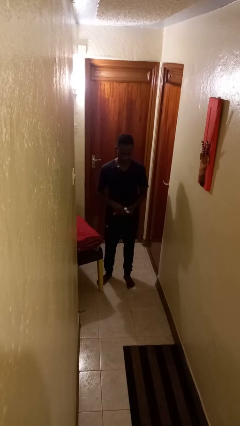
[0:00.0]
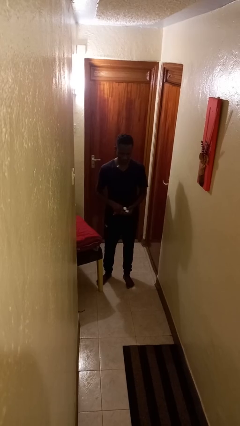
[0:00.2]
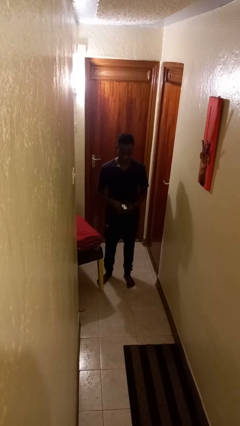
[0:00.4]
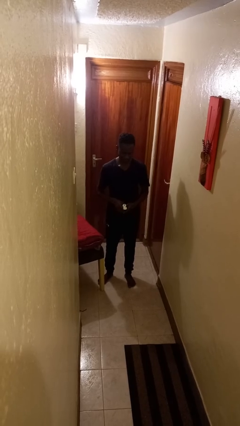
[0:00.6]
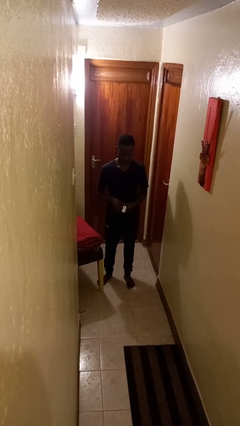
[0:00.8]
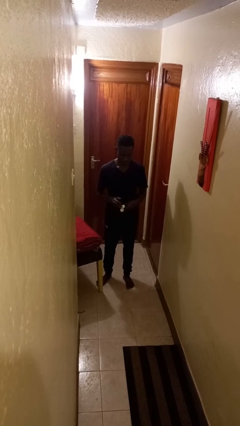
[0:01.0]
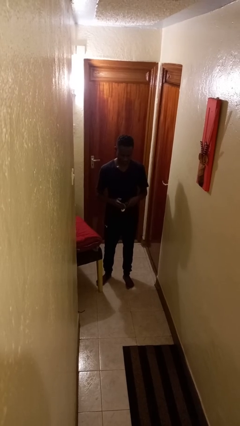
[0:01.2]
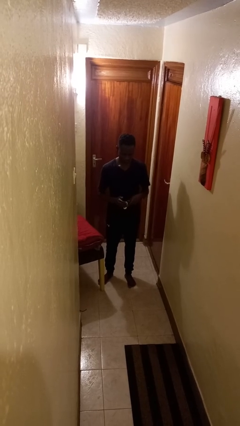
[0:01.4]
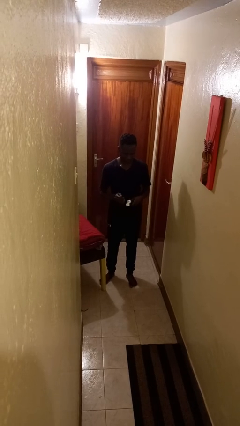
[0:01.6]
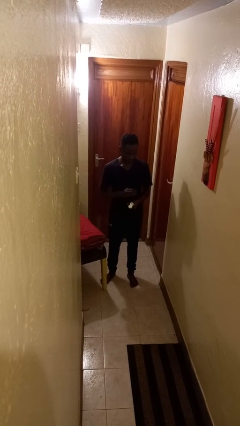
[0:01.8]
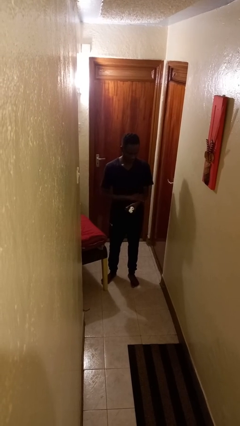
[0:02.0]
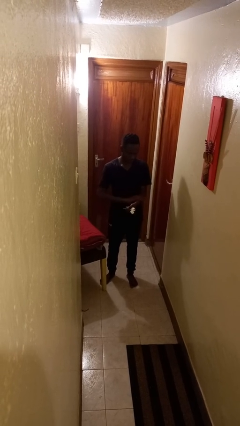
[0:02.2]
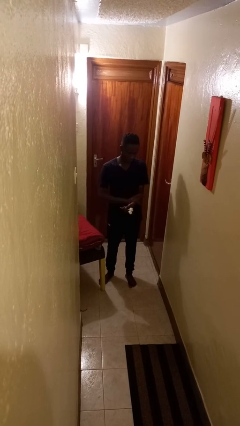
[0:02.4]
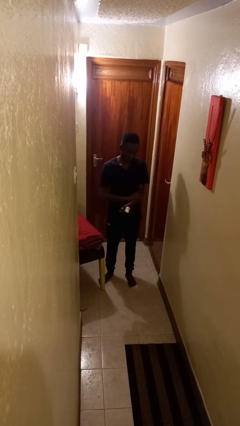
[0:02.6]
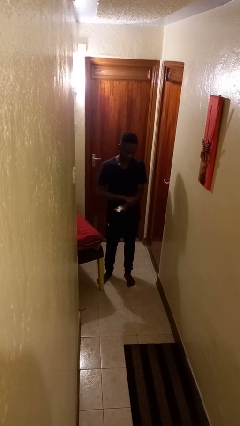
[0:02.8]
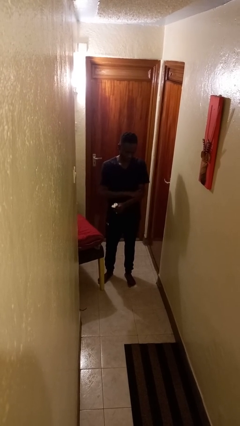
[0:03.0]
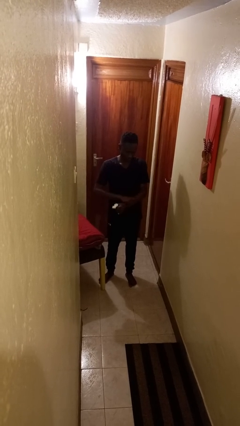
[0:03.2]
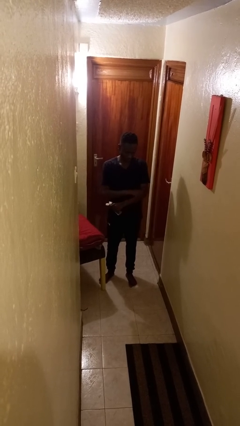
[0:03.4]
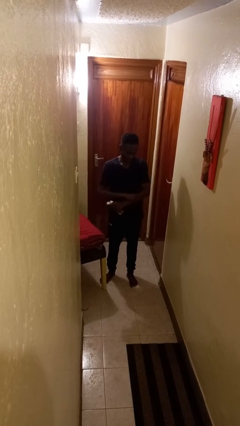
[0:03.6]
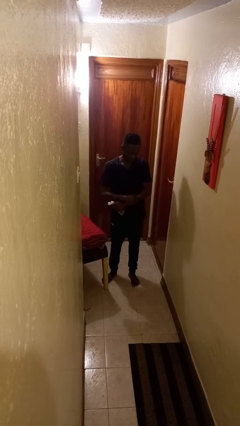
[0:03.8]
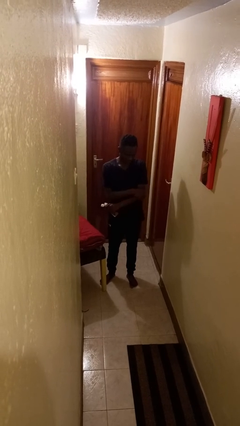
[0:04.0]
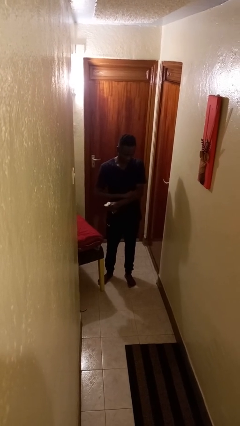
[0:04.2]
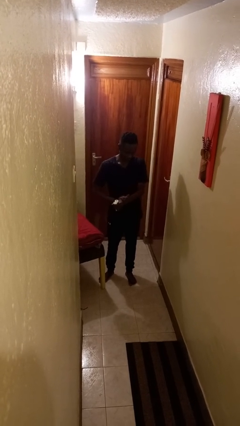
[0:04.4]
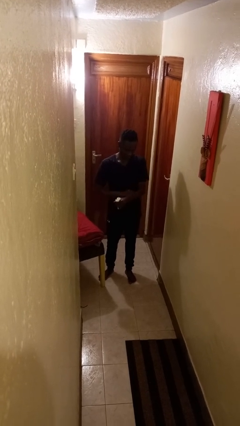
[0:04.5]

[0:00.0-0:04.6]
person applies sunscreen

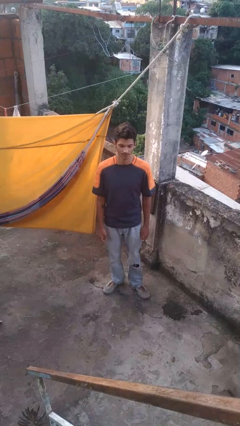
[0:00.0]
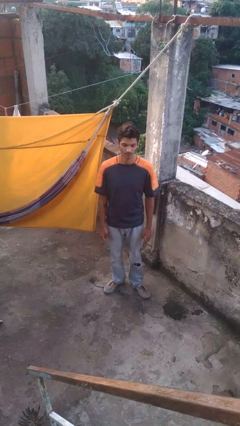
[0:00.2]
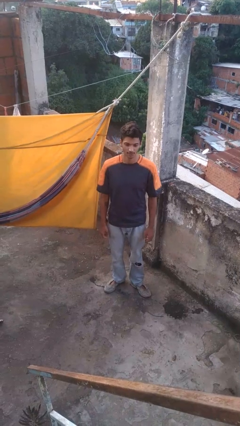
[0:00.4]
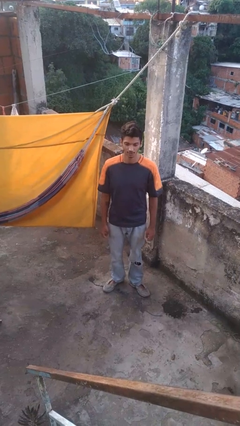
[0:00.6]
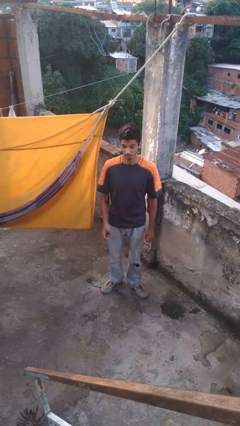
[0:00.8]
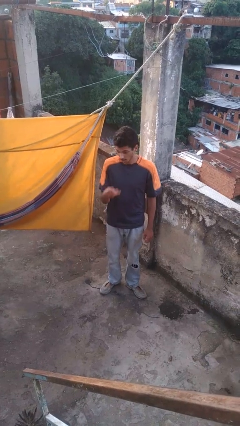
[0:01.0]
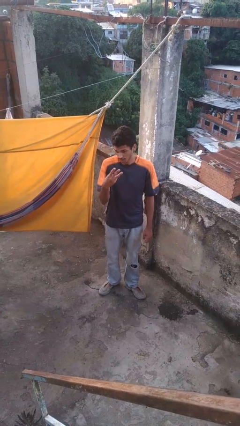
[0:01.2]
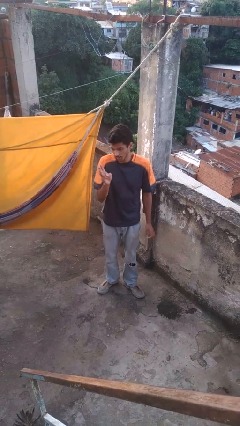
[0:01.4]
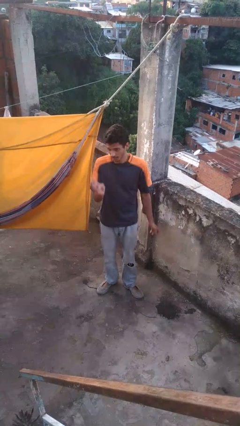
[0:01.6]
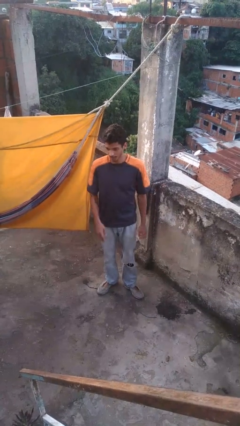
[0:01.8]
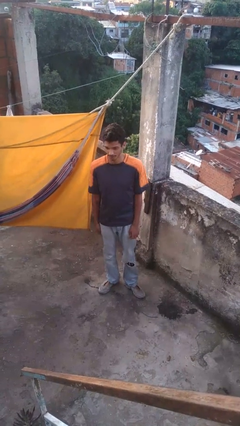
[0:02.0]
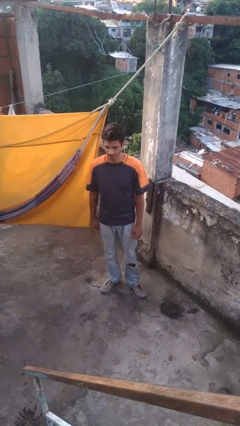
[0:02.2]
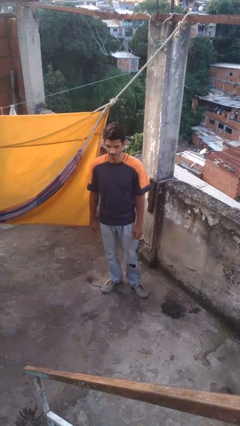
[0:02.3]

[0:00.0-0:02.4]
person gestures number three

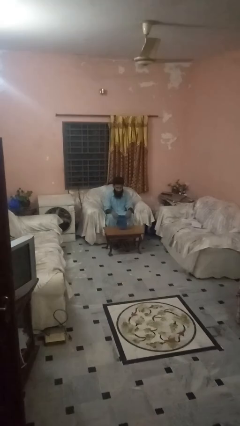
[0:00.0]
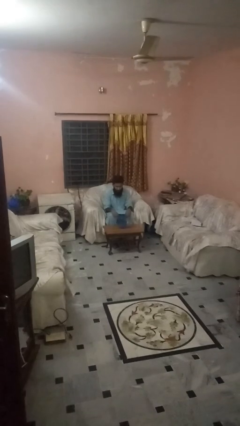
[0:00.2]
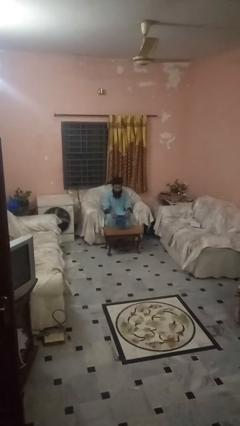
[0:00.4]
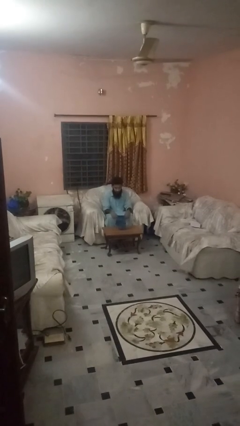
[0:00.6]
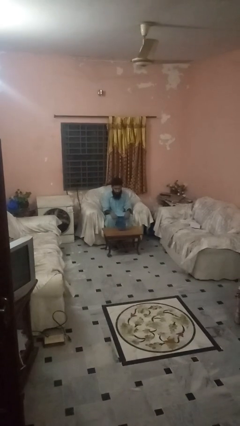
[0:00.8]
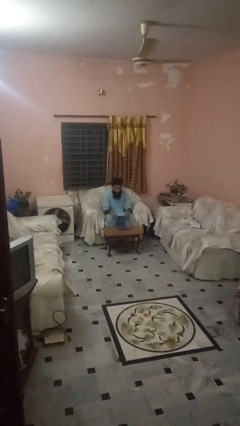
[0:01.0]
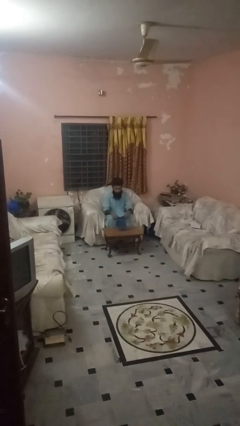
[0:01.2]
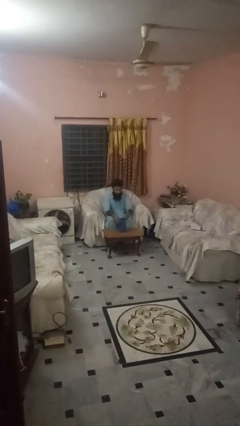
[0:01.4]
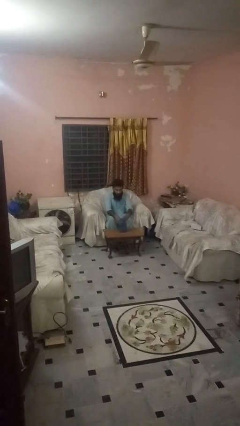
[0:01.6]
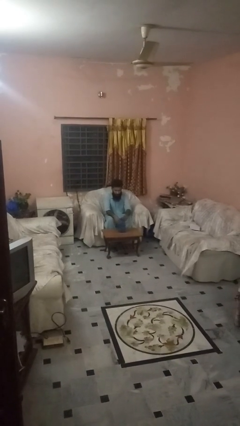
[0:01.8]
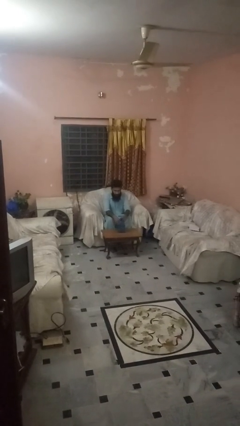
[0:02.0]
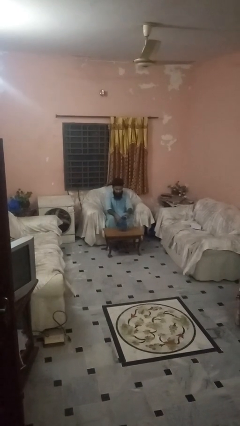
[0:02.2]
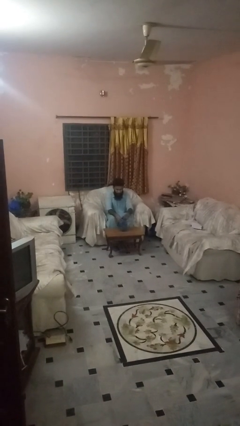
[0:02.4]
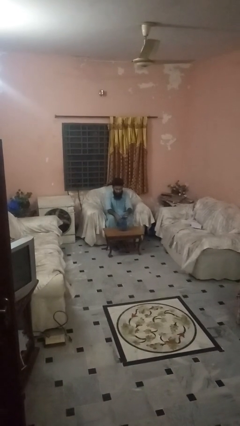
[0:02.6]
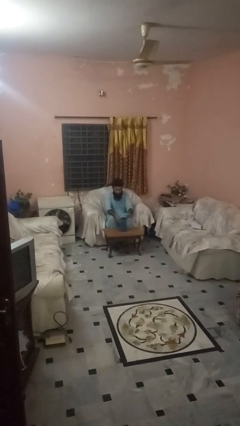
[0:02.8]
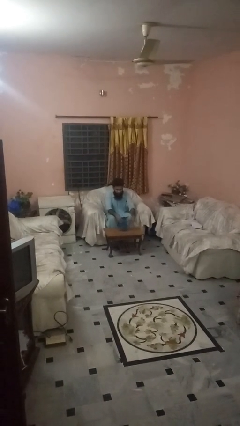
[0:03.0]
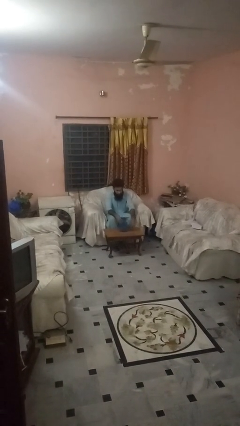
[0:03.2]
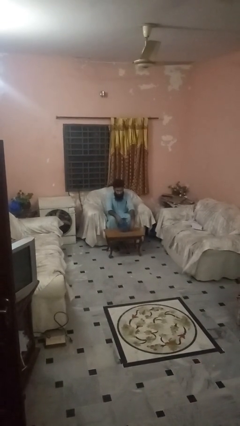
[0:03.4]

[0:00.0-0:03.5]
person unscrews lid from bottle

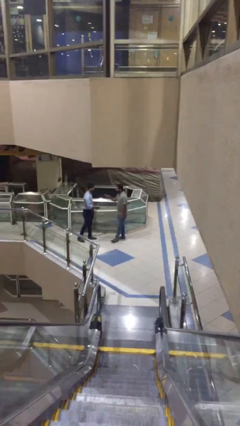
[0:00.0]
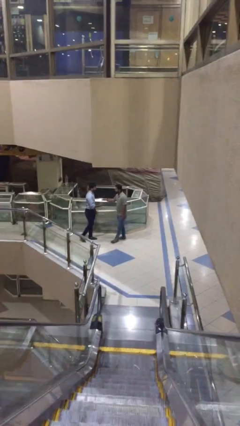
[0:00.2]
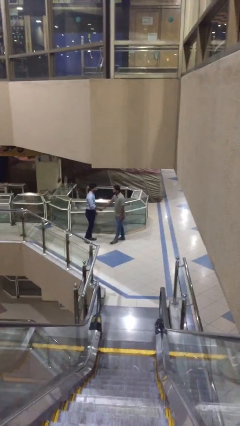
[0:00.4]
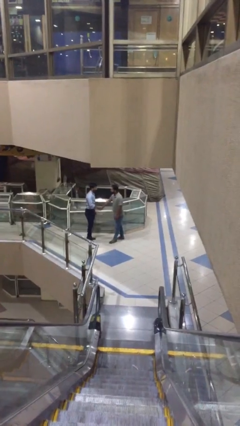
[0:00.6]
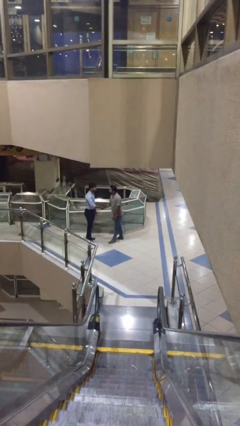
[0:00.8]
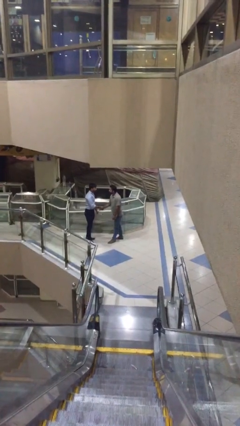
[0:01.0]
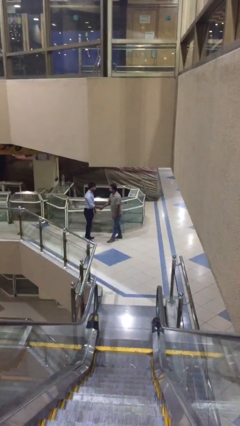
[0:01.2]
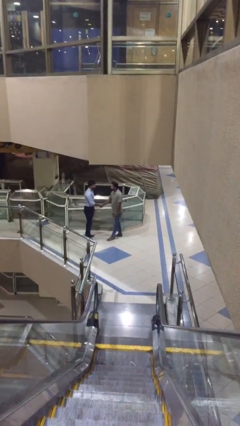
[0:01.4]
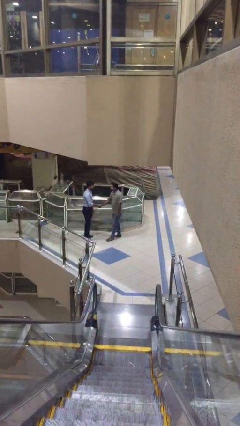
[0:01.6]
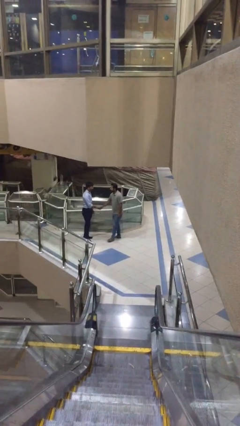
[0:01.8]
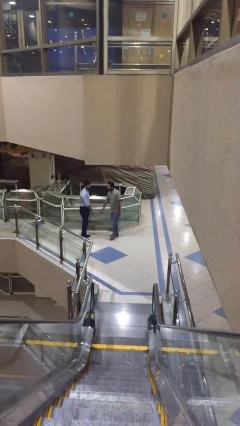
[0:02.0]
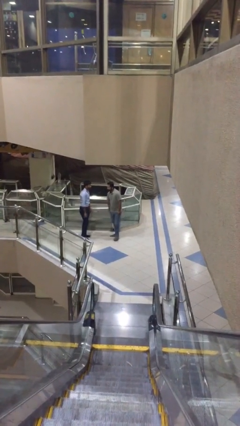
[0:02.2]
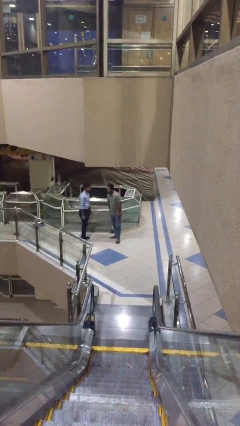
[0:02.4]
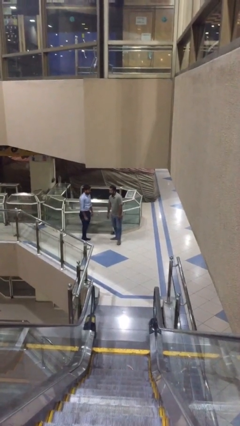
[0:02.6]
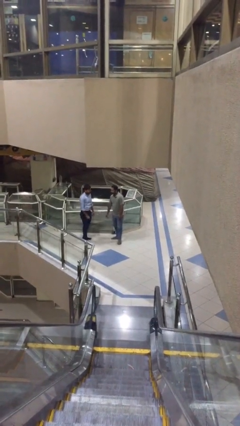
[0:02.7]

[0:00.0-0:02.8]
person shakes hand

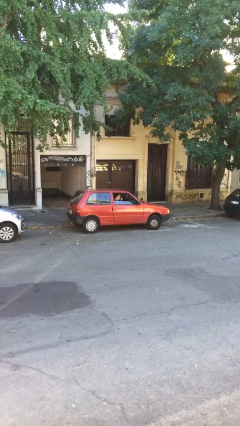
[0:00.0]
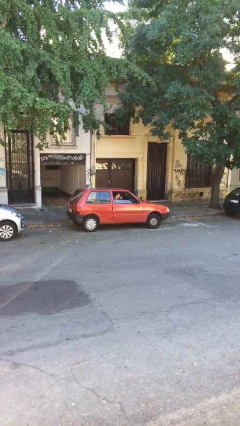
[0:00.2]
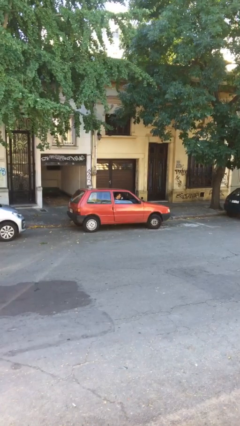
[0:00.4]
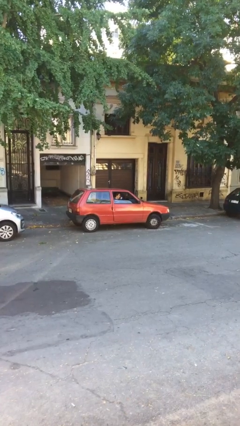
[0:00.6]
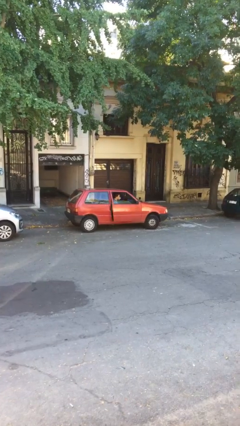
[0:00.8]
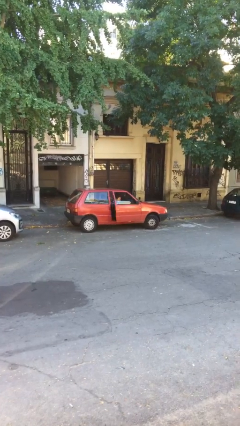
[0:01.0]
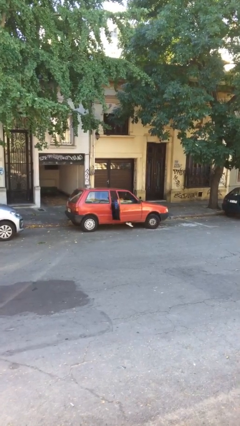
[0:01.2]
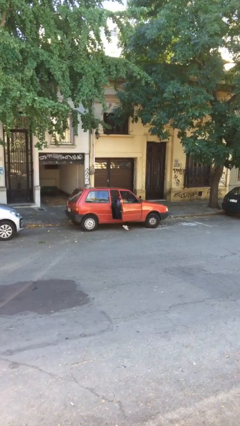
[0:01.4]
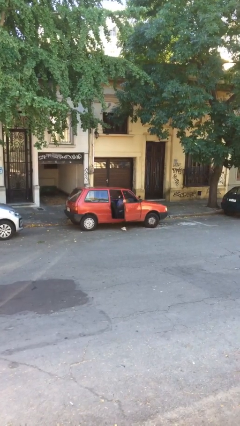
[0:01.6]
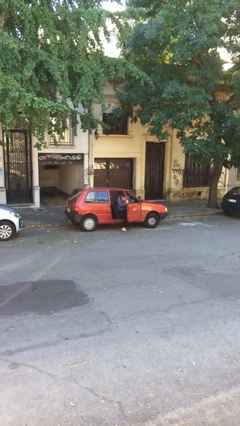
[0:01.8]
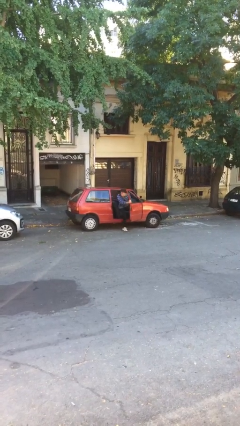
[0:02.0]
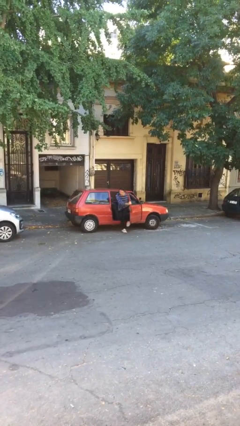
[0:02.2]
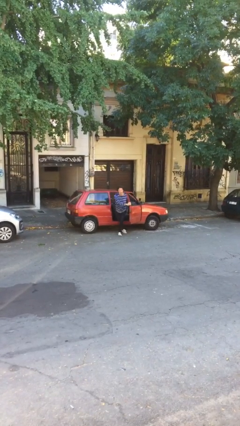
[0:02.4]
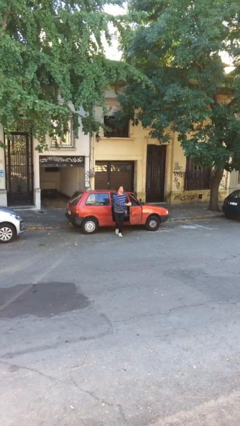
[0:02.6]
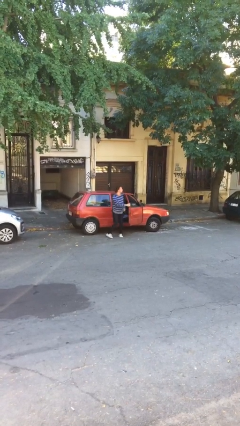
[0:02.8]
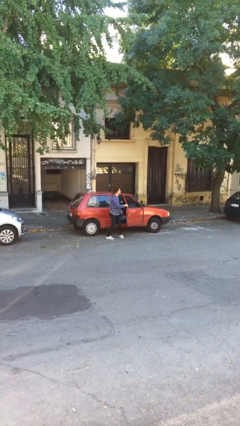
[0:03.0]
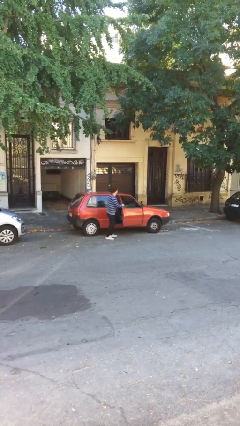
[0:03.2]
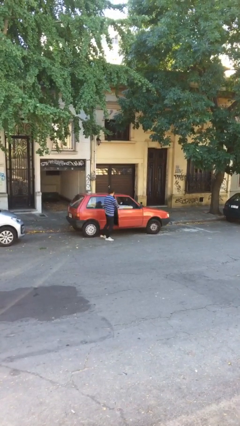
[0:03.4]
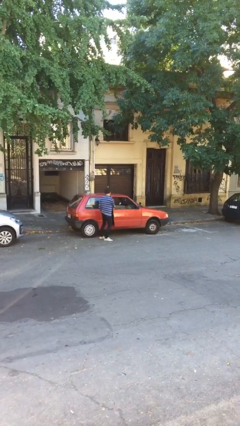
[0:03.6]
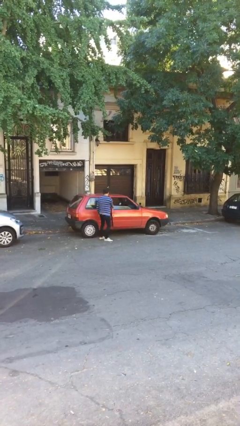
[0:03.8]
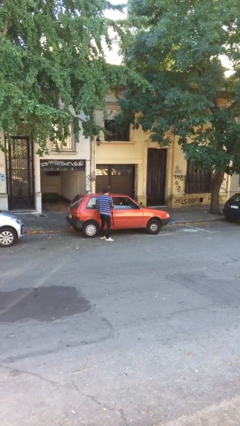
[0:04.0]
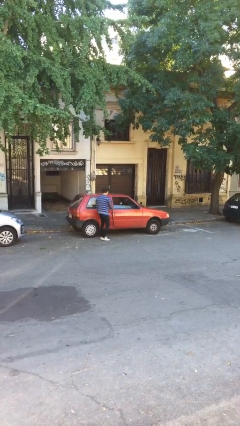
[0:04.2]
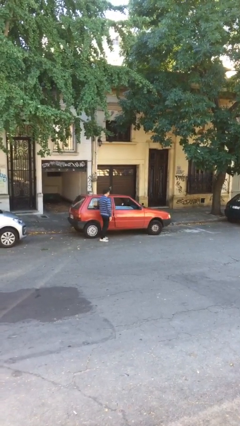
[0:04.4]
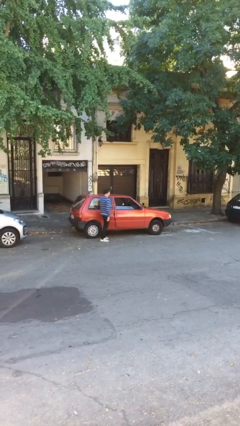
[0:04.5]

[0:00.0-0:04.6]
car drops off person
